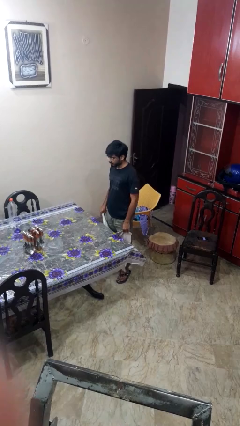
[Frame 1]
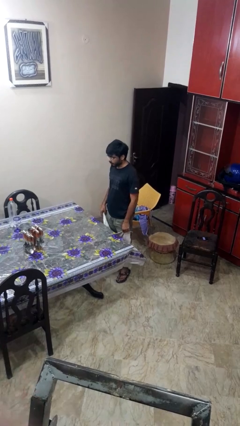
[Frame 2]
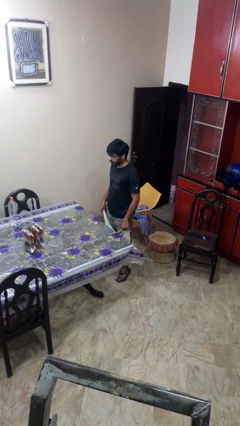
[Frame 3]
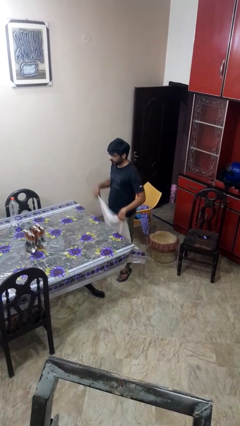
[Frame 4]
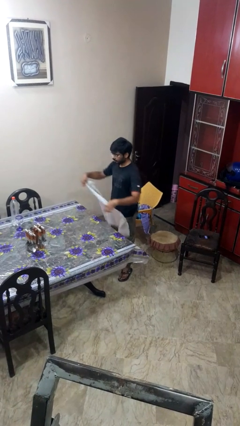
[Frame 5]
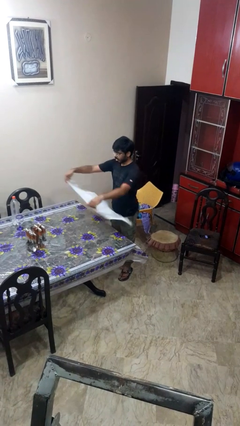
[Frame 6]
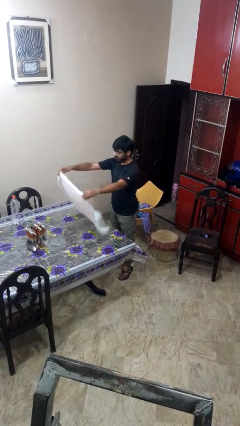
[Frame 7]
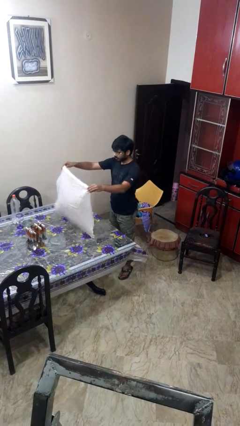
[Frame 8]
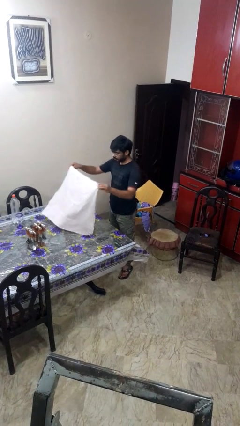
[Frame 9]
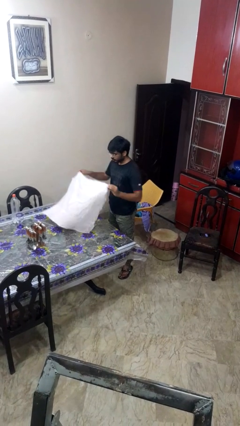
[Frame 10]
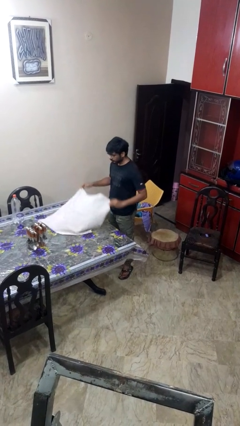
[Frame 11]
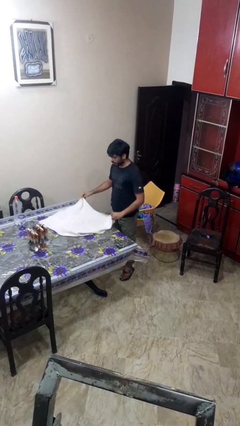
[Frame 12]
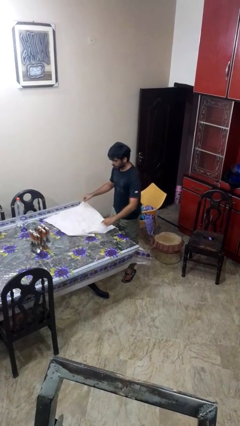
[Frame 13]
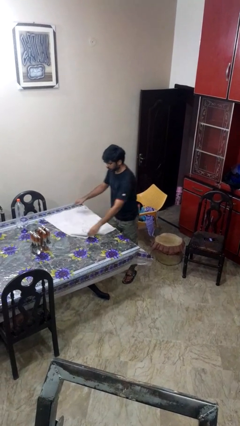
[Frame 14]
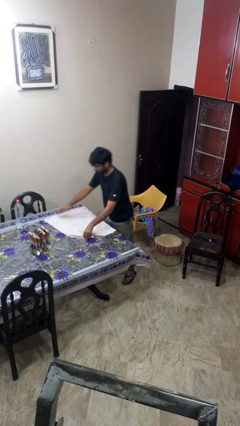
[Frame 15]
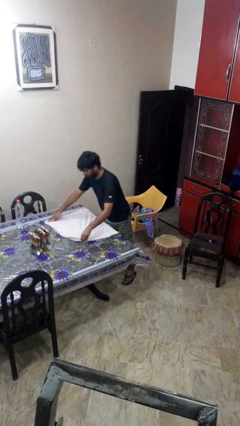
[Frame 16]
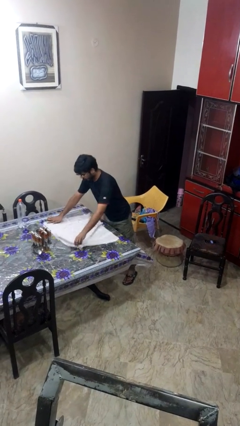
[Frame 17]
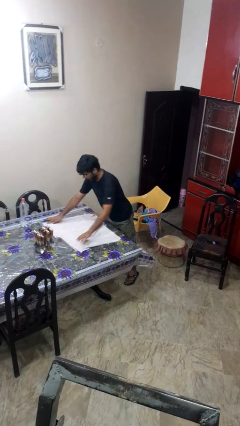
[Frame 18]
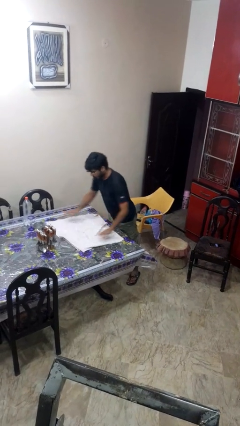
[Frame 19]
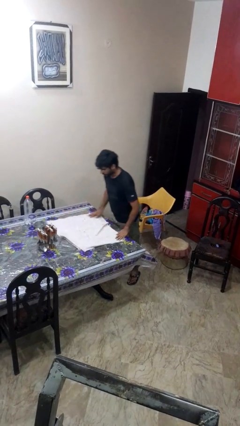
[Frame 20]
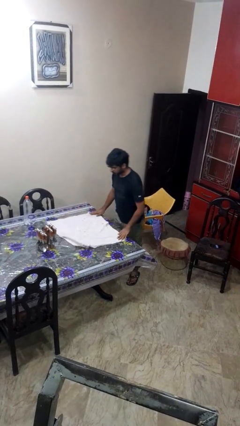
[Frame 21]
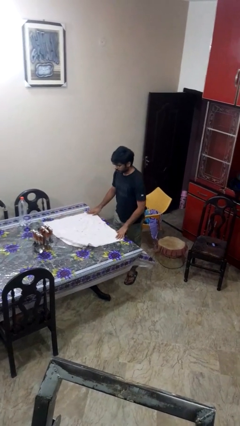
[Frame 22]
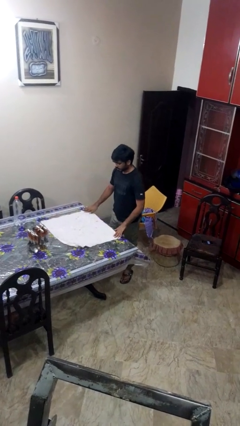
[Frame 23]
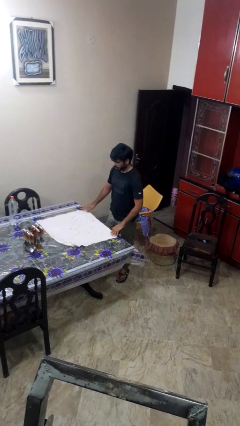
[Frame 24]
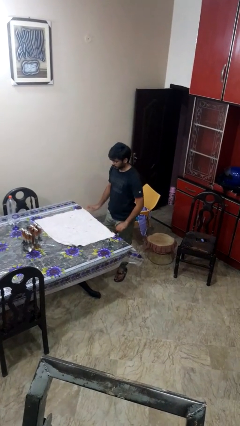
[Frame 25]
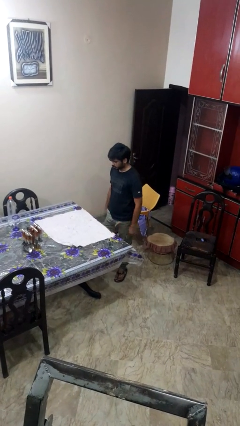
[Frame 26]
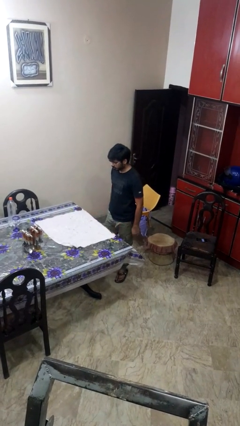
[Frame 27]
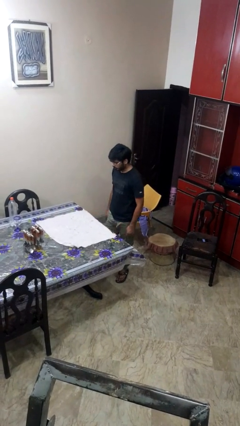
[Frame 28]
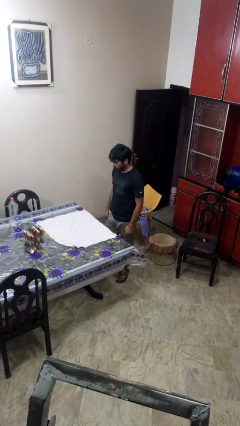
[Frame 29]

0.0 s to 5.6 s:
person spreads tablecloth

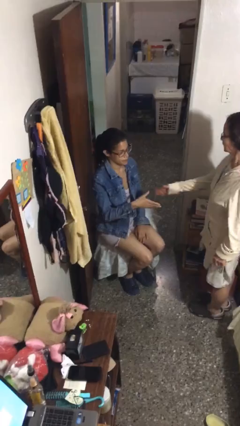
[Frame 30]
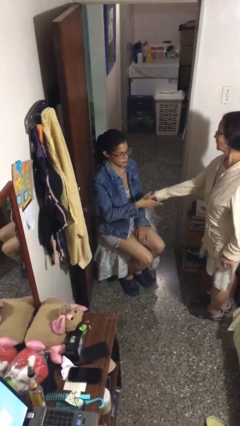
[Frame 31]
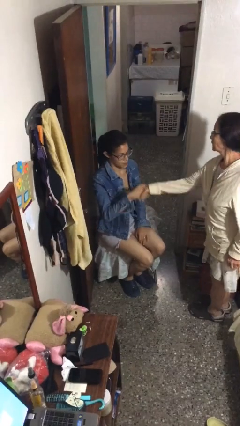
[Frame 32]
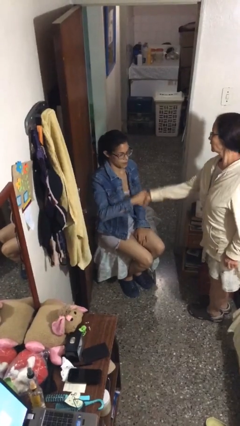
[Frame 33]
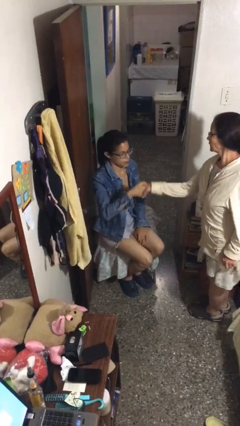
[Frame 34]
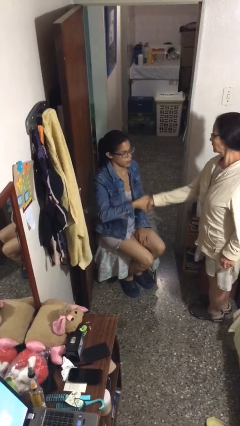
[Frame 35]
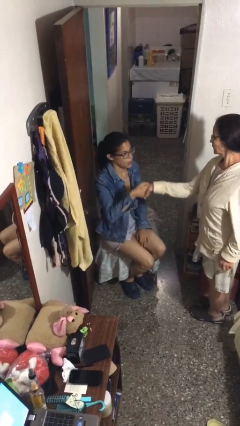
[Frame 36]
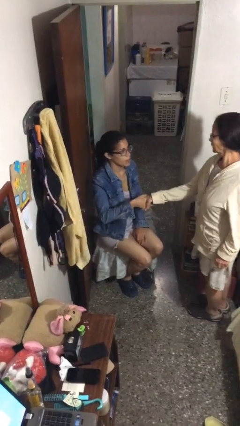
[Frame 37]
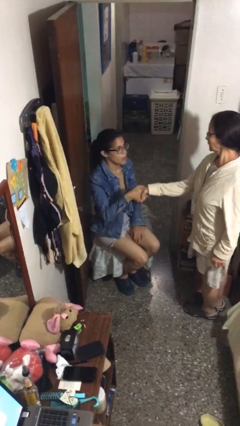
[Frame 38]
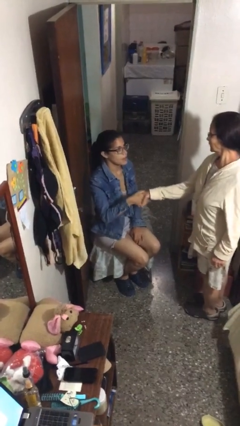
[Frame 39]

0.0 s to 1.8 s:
person shakes hand

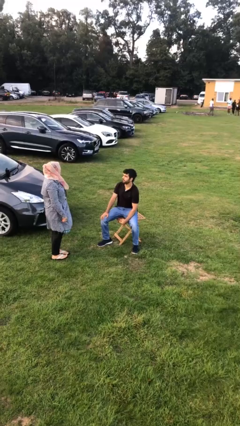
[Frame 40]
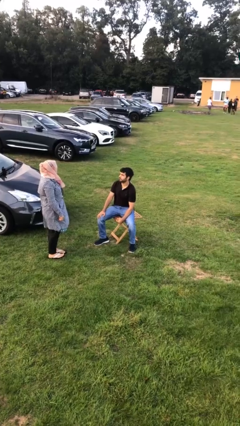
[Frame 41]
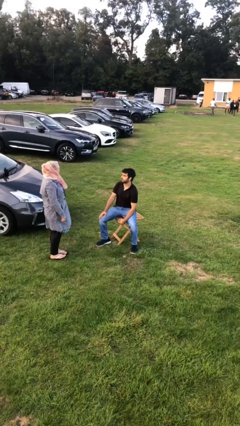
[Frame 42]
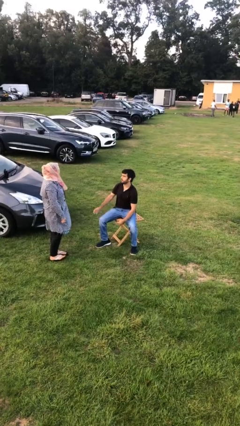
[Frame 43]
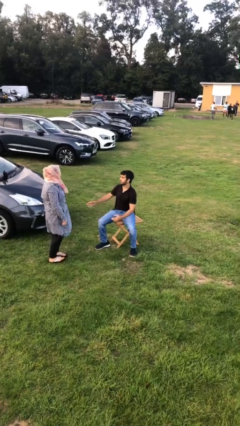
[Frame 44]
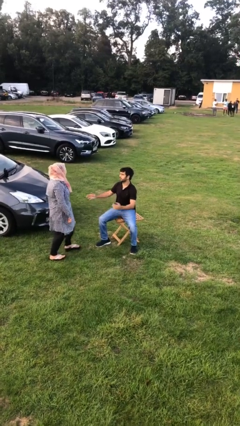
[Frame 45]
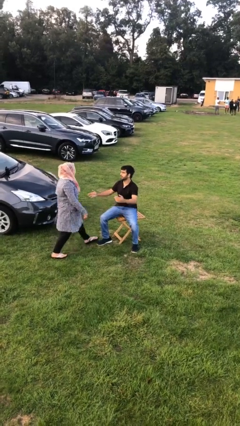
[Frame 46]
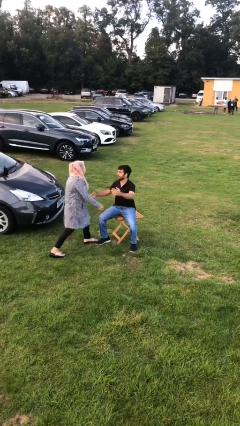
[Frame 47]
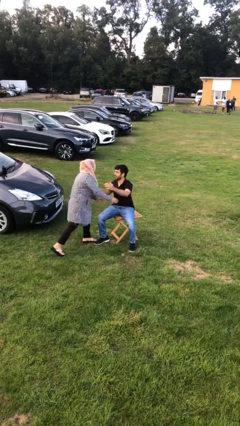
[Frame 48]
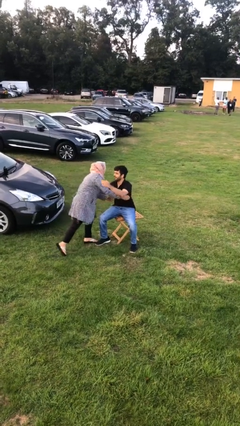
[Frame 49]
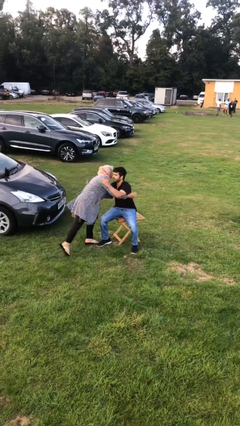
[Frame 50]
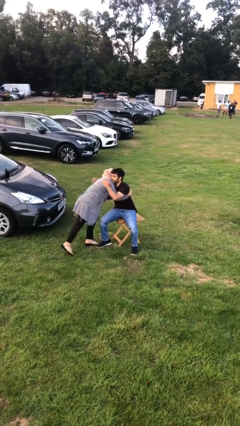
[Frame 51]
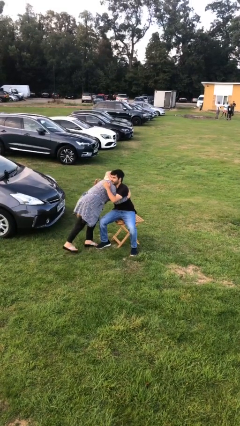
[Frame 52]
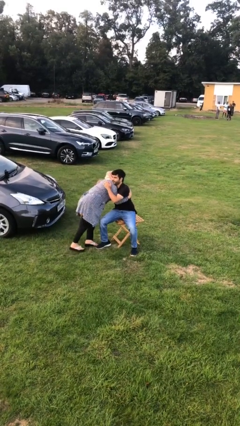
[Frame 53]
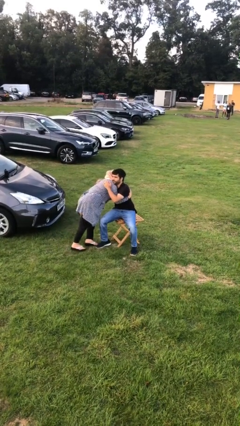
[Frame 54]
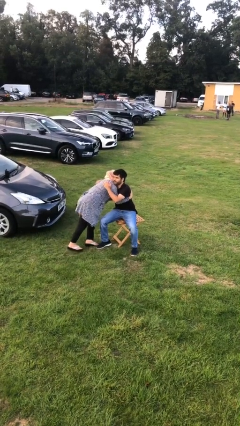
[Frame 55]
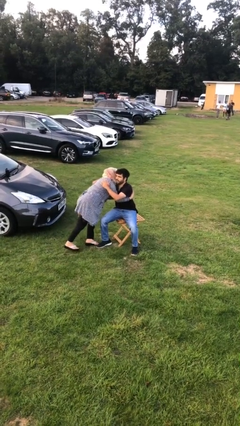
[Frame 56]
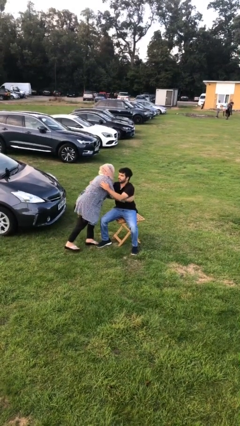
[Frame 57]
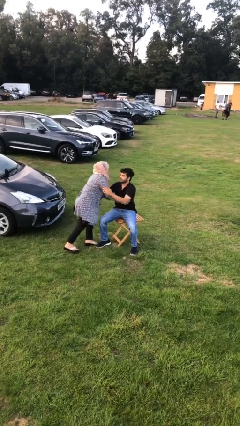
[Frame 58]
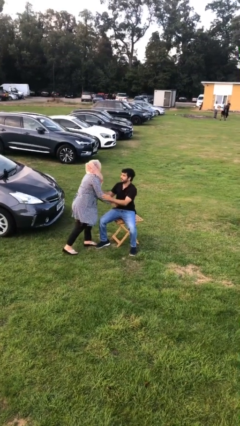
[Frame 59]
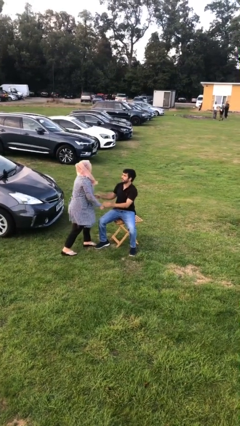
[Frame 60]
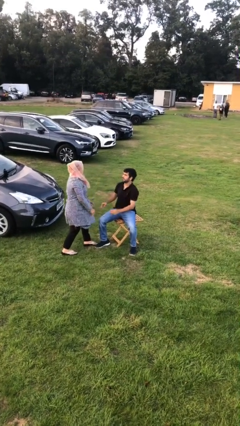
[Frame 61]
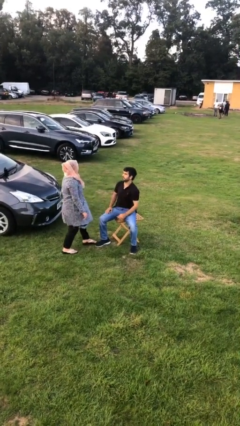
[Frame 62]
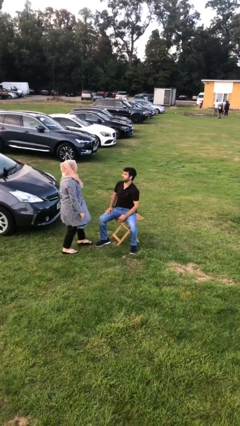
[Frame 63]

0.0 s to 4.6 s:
person embraces person

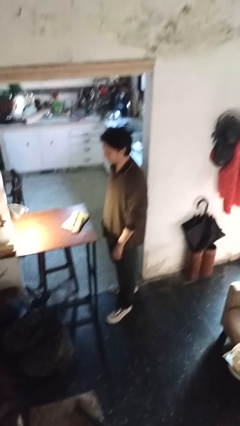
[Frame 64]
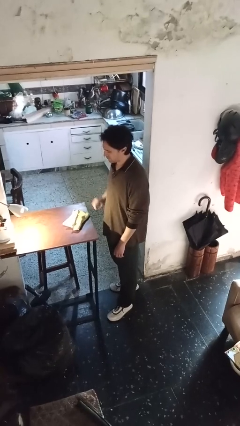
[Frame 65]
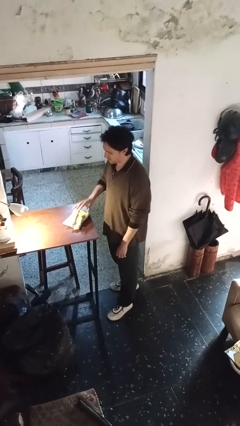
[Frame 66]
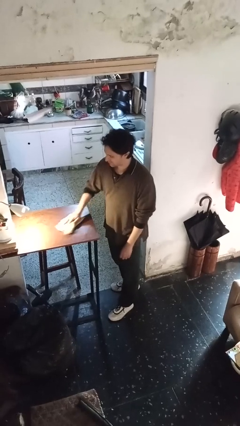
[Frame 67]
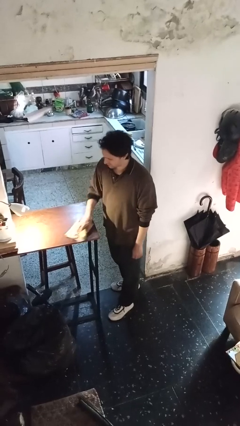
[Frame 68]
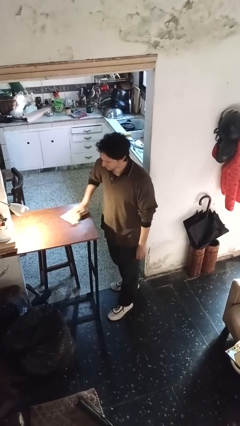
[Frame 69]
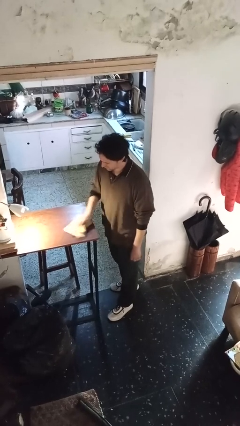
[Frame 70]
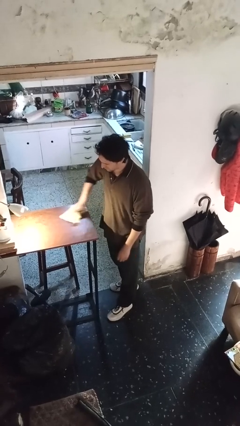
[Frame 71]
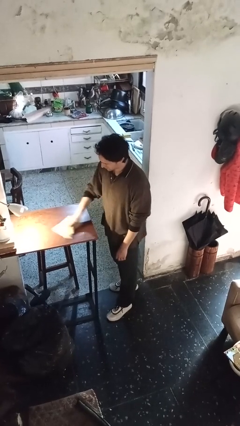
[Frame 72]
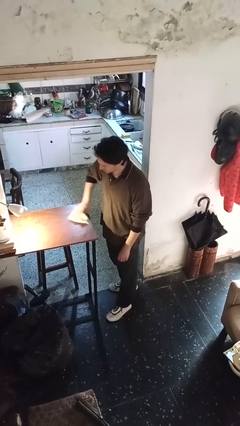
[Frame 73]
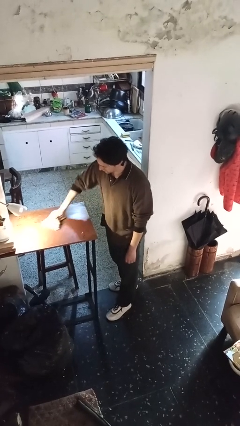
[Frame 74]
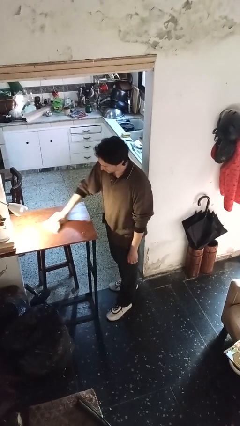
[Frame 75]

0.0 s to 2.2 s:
person cleans table with rag

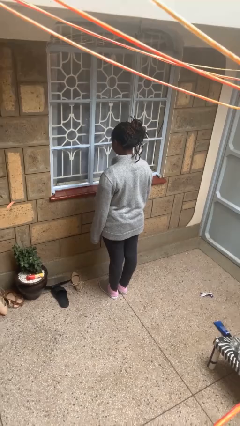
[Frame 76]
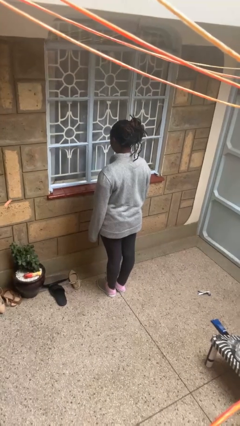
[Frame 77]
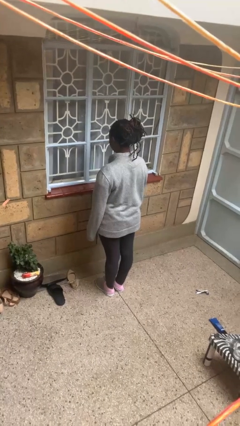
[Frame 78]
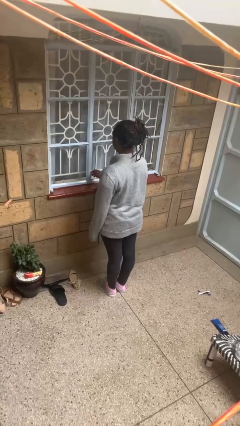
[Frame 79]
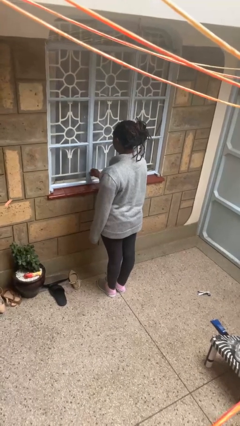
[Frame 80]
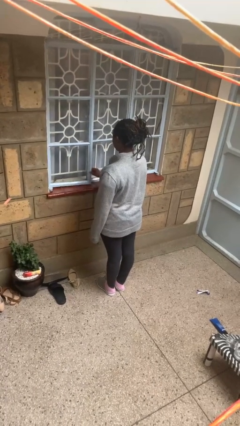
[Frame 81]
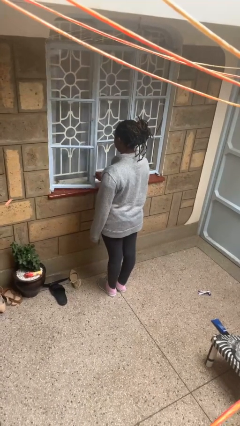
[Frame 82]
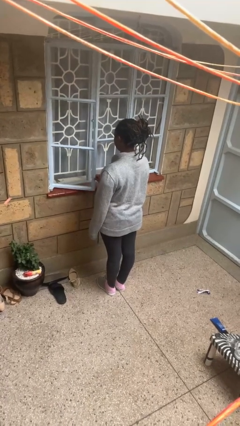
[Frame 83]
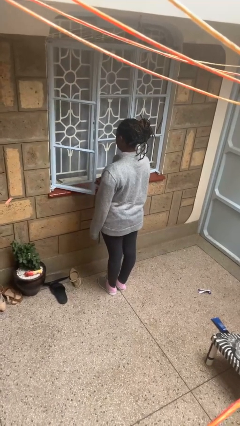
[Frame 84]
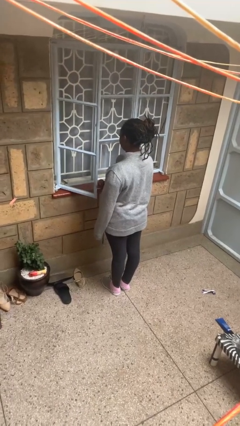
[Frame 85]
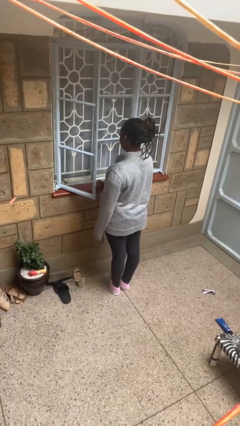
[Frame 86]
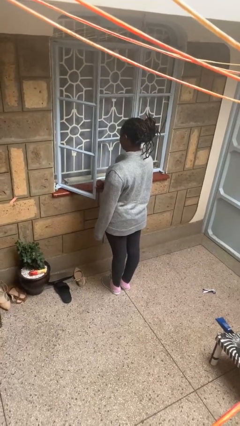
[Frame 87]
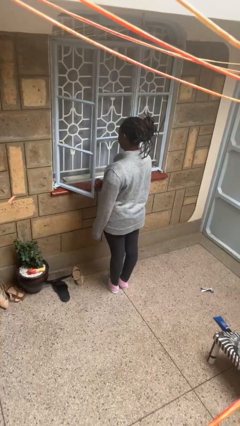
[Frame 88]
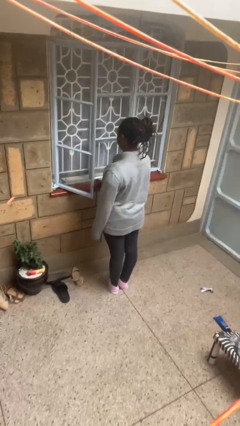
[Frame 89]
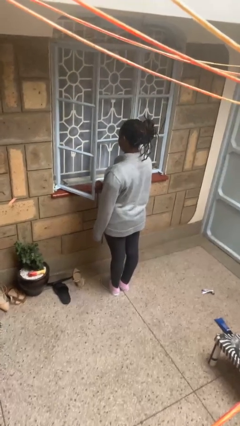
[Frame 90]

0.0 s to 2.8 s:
person opens home window

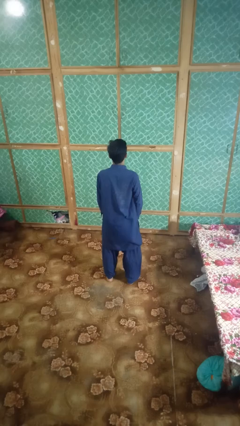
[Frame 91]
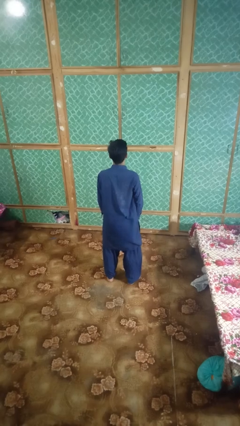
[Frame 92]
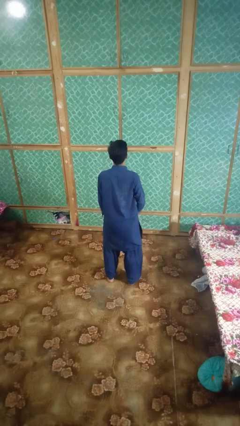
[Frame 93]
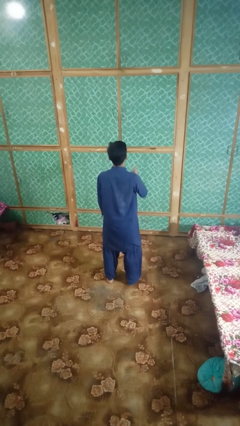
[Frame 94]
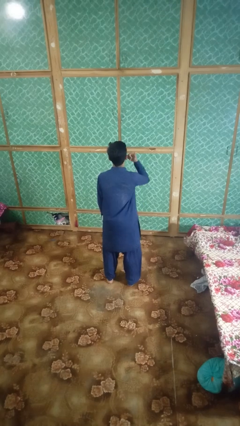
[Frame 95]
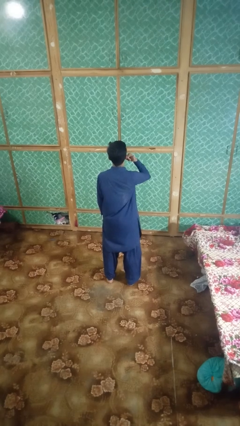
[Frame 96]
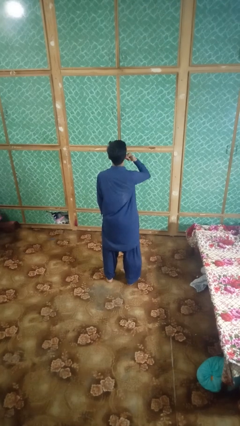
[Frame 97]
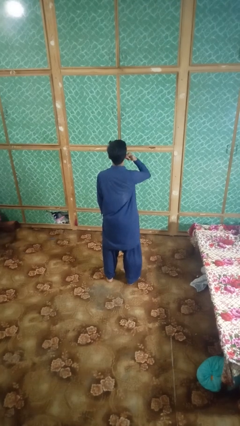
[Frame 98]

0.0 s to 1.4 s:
person gestures call me
